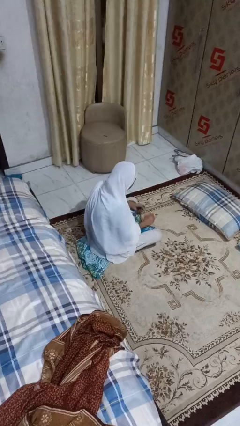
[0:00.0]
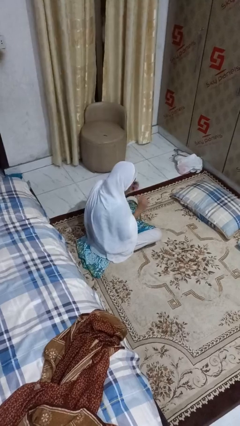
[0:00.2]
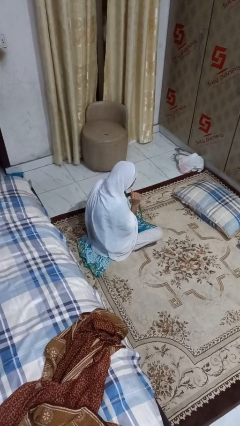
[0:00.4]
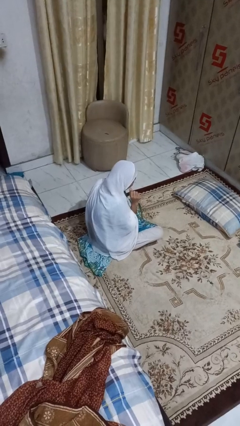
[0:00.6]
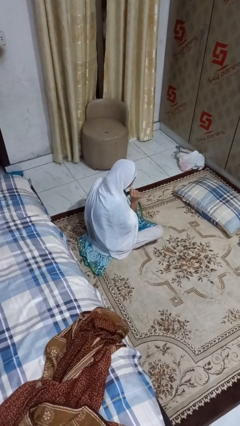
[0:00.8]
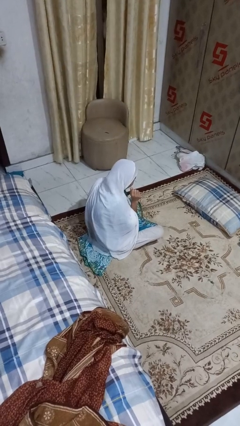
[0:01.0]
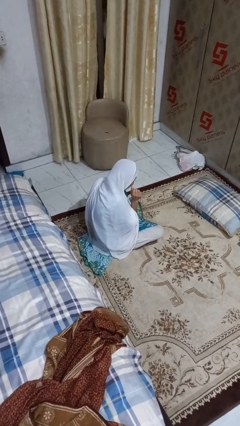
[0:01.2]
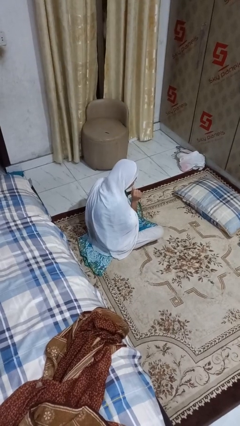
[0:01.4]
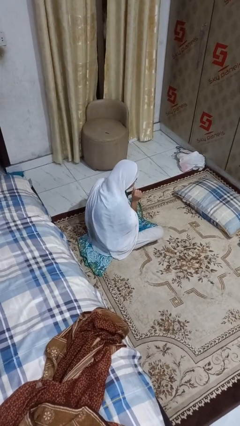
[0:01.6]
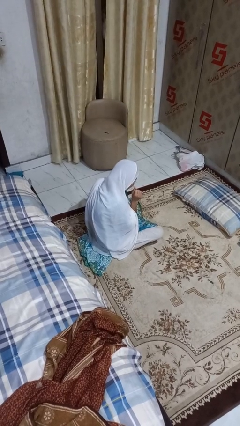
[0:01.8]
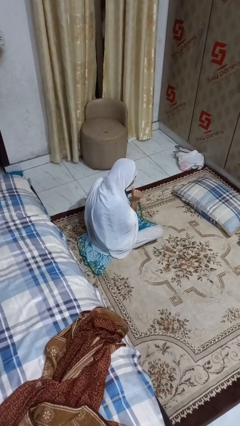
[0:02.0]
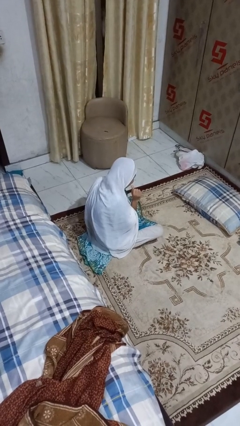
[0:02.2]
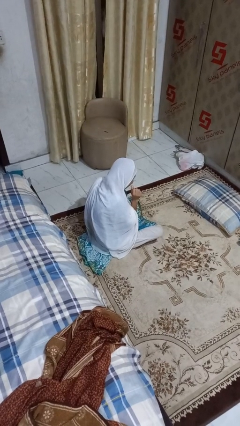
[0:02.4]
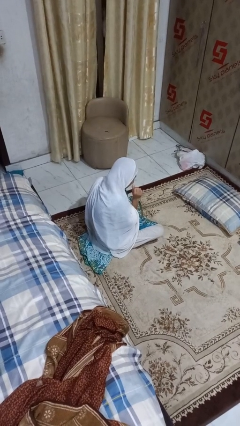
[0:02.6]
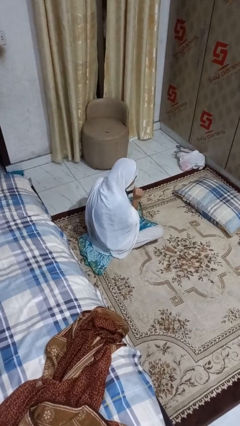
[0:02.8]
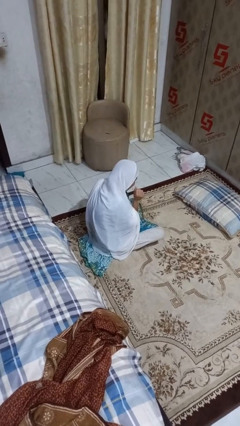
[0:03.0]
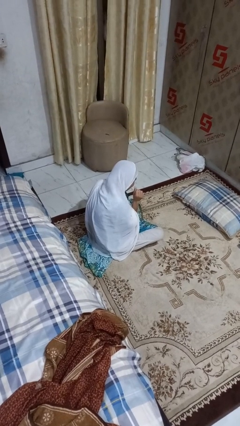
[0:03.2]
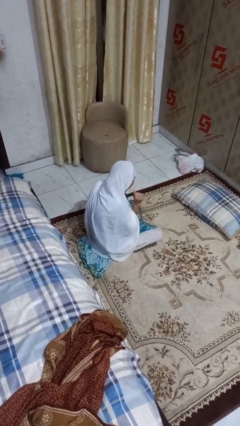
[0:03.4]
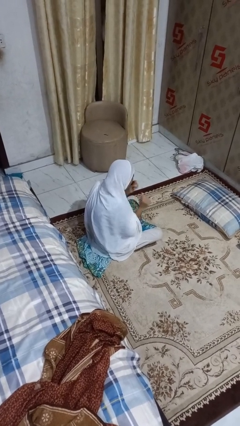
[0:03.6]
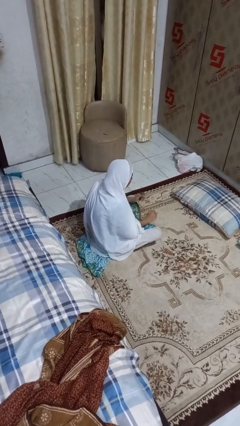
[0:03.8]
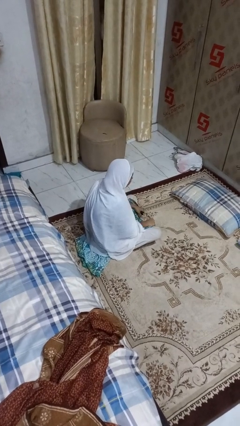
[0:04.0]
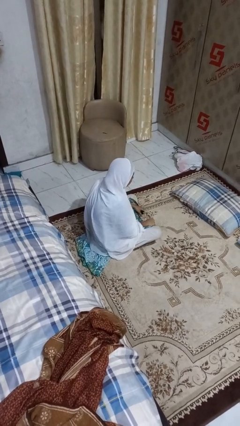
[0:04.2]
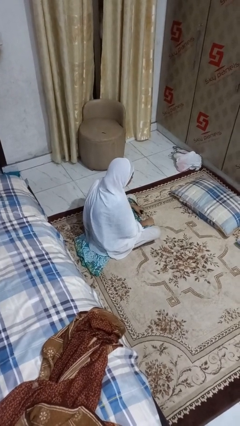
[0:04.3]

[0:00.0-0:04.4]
person flosses

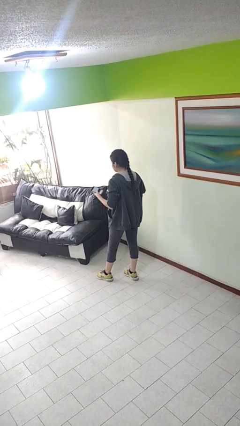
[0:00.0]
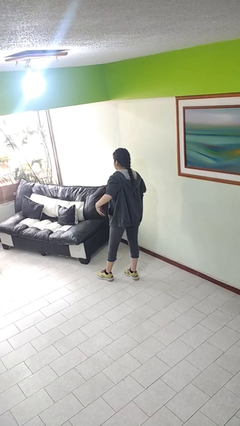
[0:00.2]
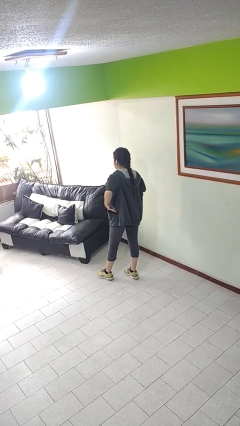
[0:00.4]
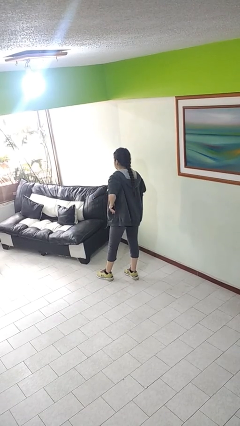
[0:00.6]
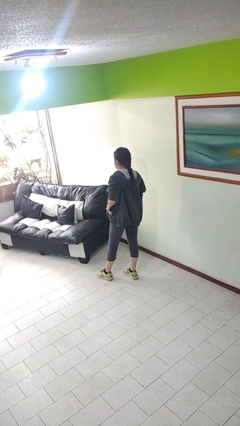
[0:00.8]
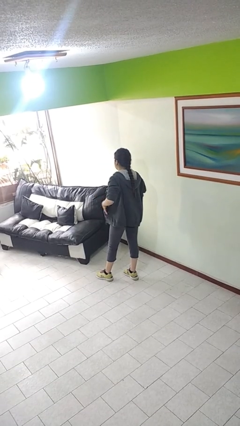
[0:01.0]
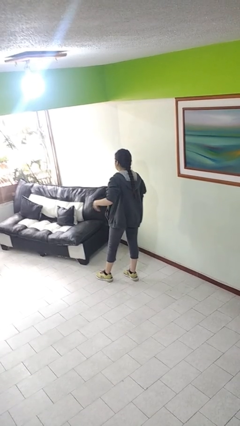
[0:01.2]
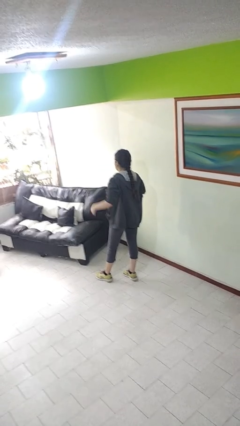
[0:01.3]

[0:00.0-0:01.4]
person puts phone into pocket

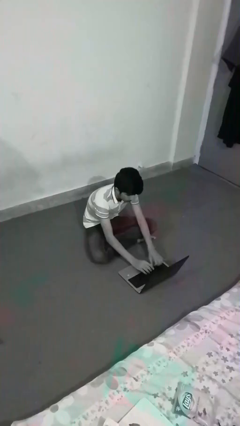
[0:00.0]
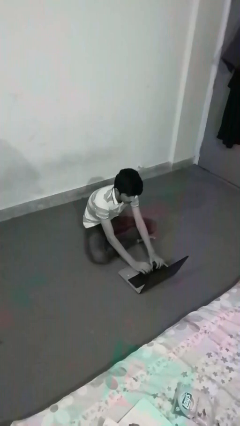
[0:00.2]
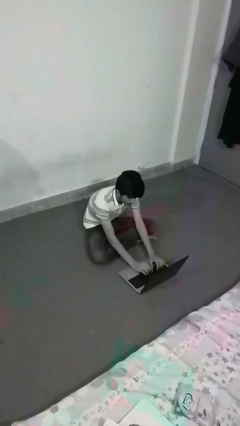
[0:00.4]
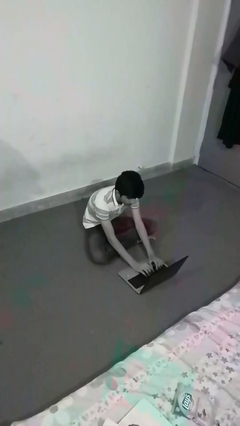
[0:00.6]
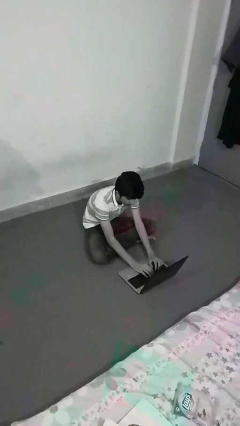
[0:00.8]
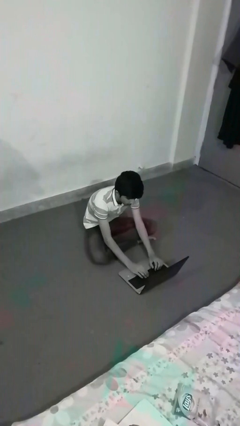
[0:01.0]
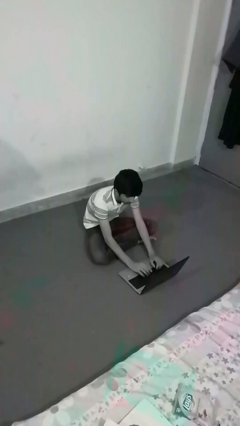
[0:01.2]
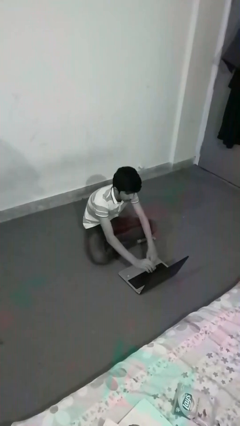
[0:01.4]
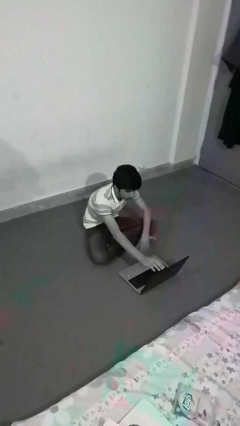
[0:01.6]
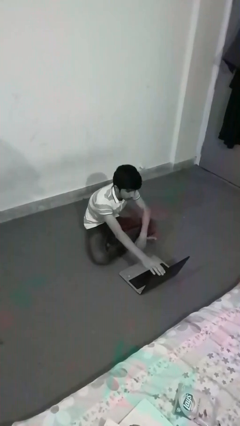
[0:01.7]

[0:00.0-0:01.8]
person interacts with laptop

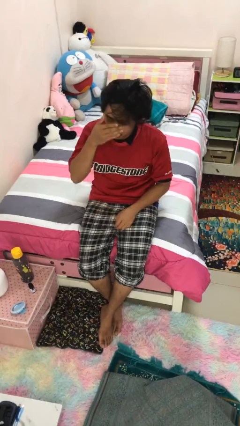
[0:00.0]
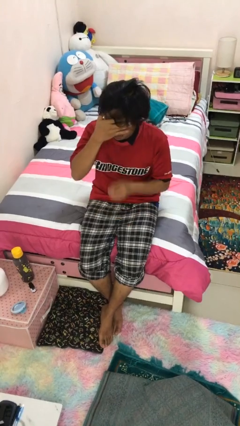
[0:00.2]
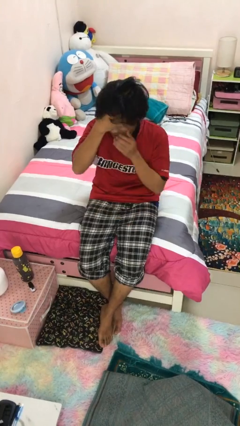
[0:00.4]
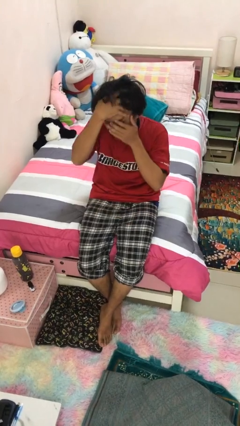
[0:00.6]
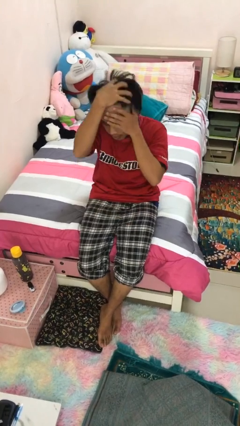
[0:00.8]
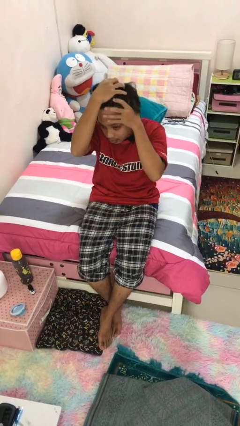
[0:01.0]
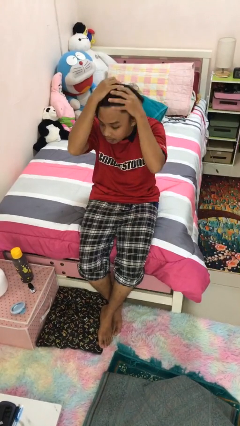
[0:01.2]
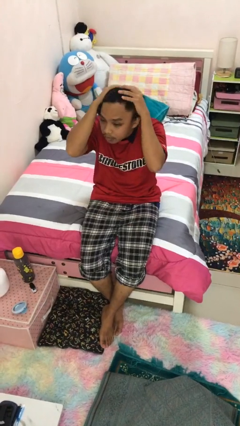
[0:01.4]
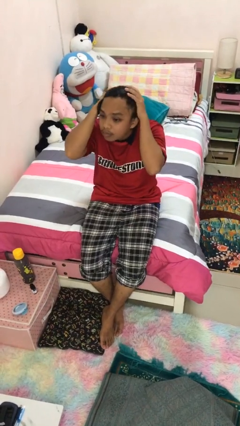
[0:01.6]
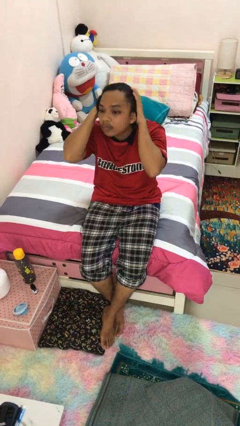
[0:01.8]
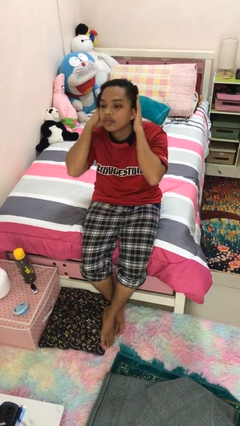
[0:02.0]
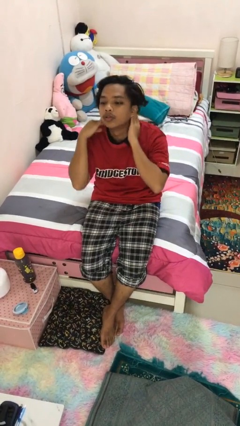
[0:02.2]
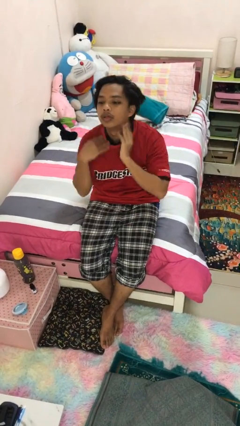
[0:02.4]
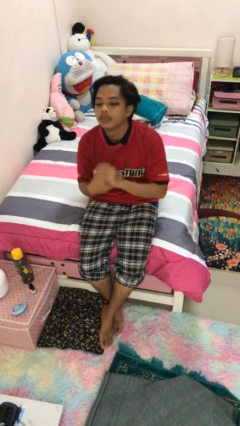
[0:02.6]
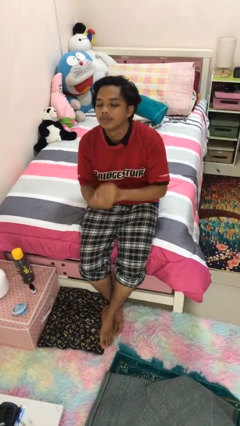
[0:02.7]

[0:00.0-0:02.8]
person strokes hair

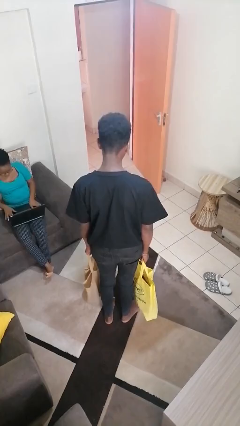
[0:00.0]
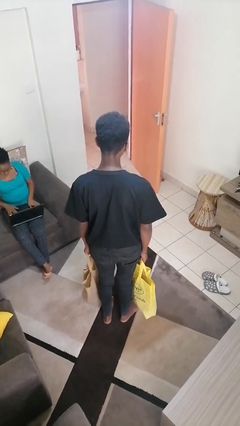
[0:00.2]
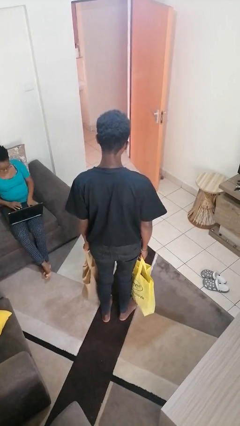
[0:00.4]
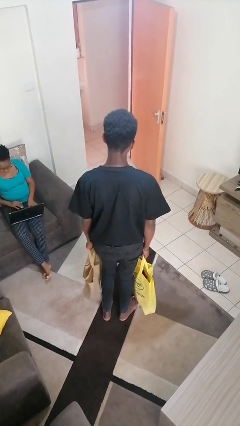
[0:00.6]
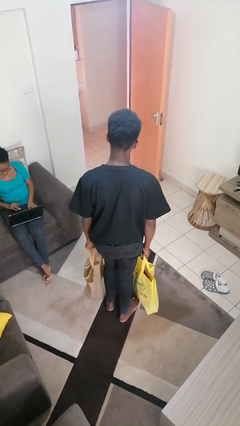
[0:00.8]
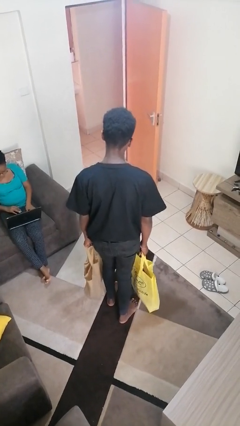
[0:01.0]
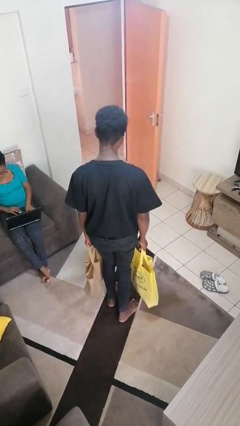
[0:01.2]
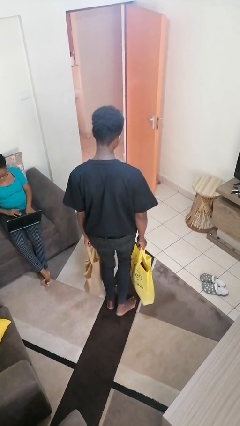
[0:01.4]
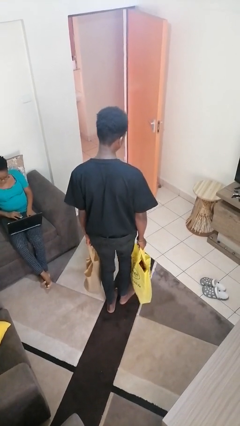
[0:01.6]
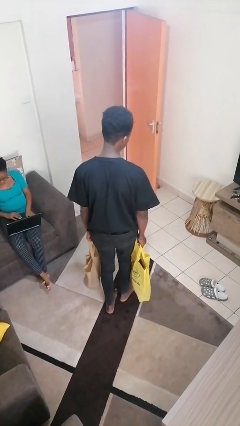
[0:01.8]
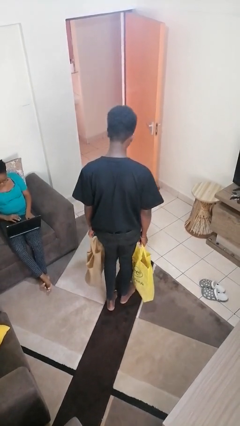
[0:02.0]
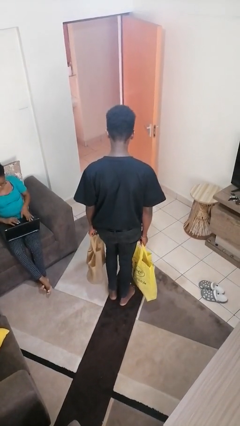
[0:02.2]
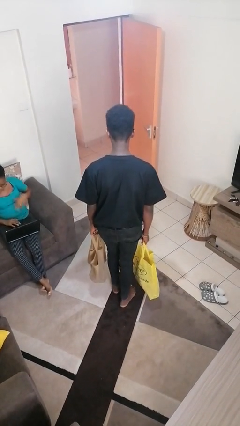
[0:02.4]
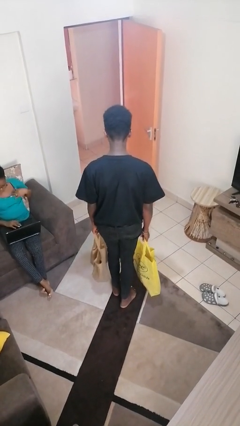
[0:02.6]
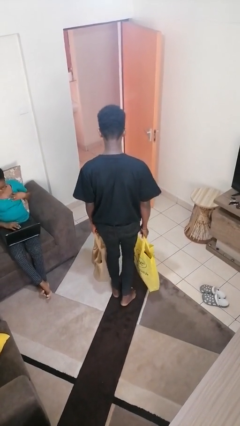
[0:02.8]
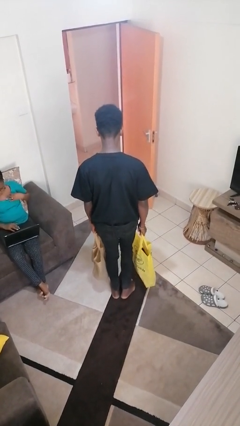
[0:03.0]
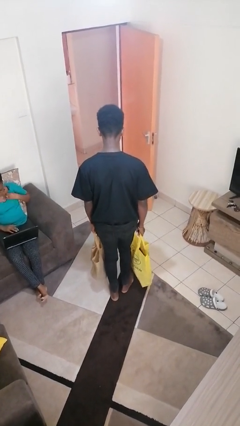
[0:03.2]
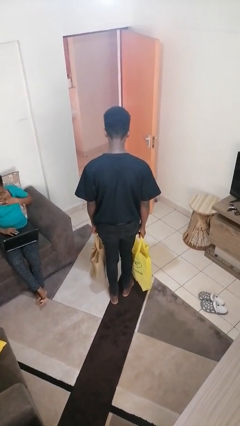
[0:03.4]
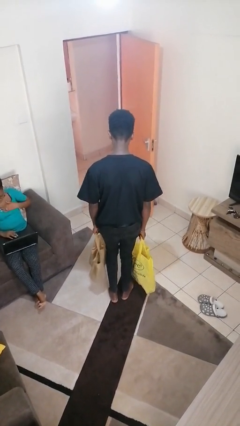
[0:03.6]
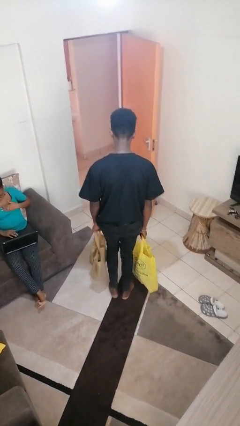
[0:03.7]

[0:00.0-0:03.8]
person carries groceries

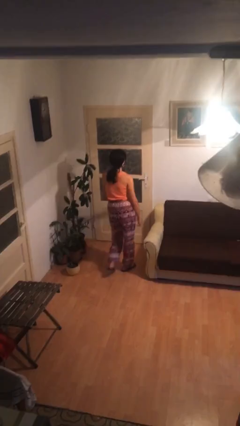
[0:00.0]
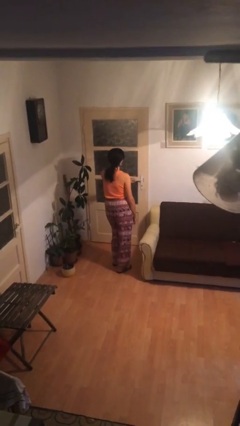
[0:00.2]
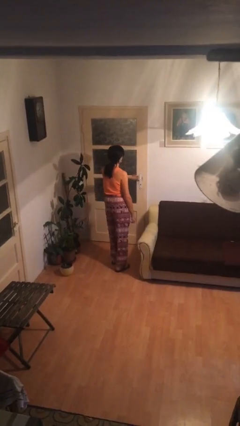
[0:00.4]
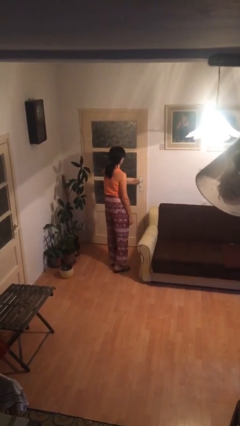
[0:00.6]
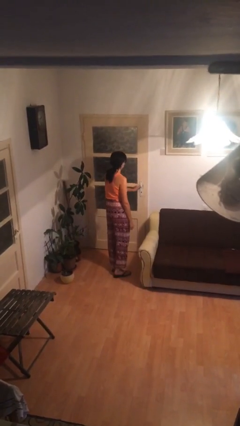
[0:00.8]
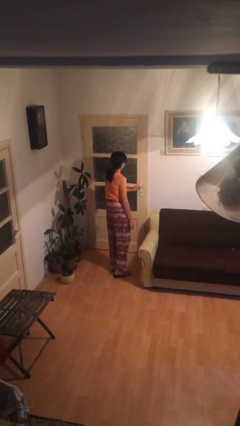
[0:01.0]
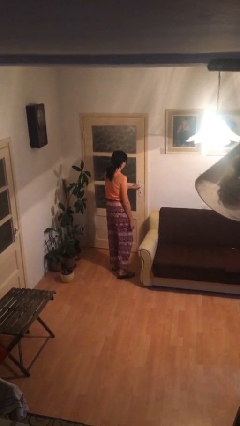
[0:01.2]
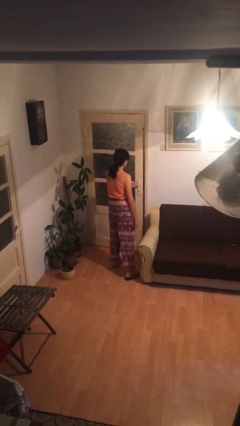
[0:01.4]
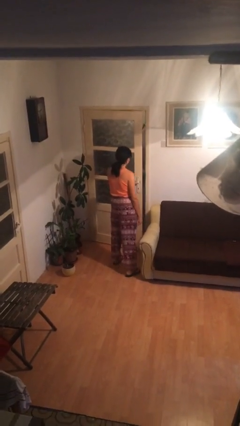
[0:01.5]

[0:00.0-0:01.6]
person opens facility door

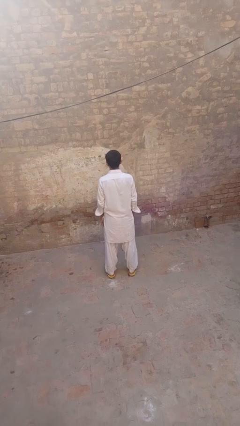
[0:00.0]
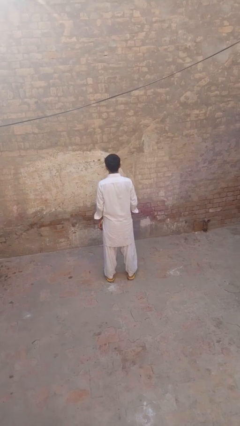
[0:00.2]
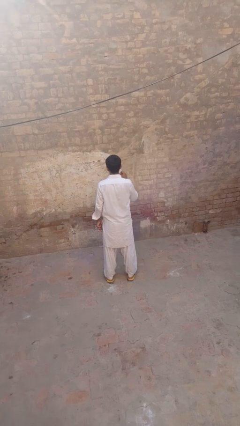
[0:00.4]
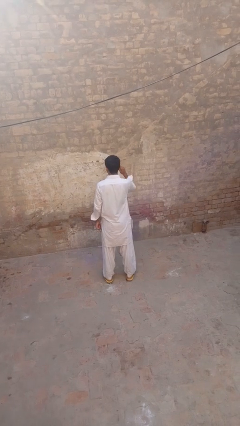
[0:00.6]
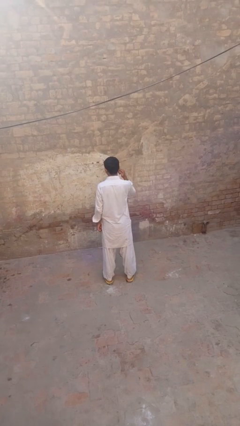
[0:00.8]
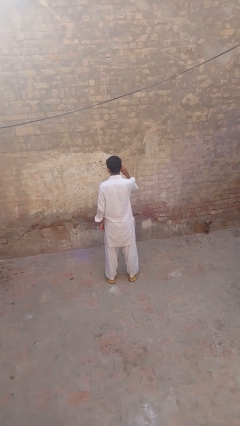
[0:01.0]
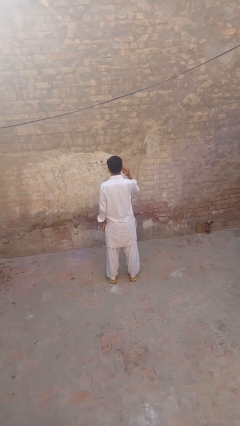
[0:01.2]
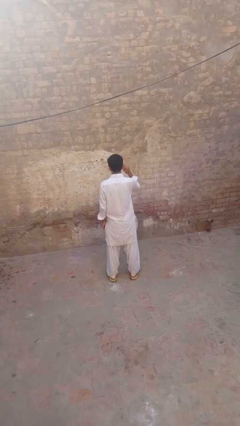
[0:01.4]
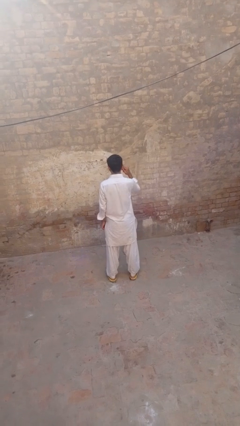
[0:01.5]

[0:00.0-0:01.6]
person touches earlobe
